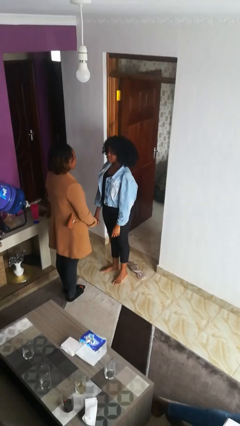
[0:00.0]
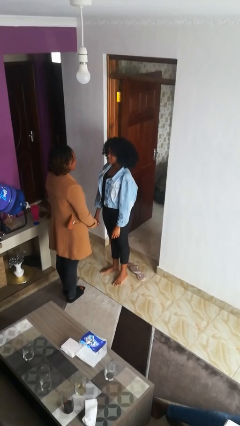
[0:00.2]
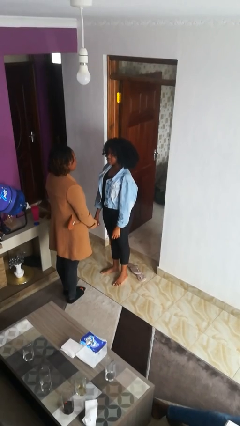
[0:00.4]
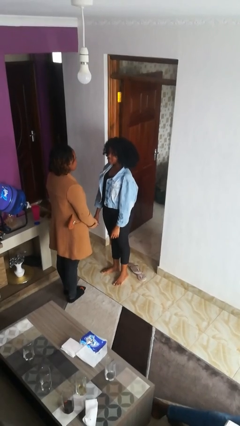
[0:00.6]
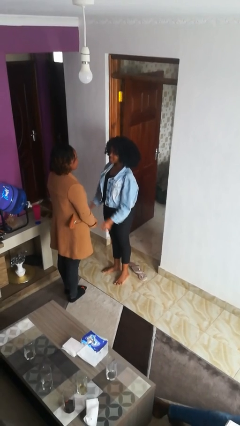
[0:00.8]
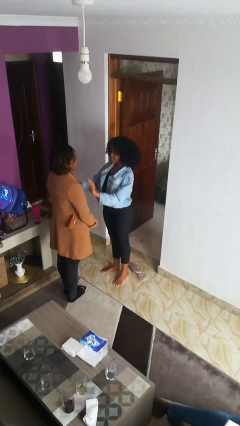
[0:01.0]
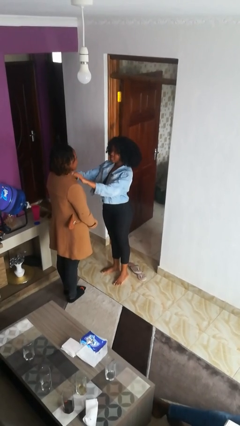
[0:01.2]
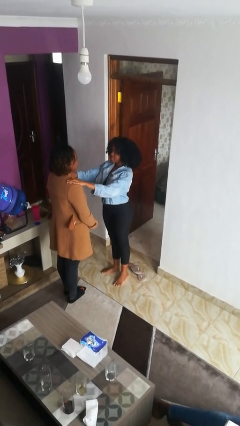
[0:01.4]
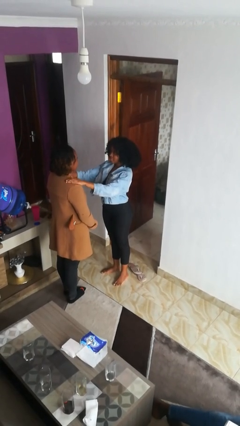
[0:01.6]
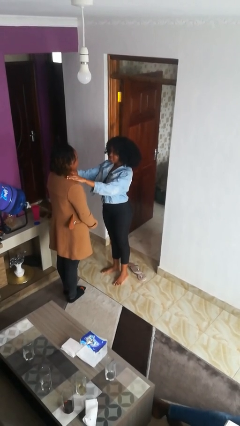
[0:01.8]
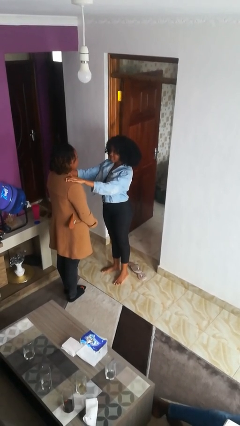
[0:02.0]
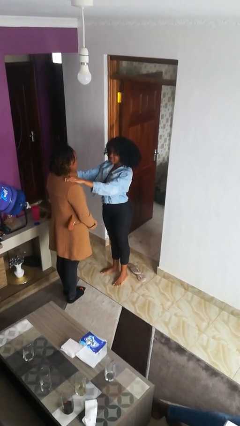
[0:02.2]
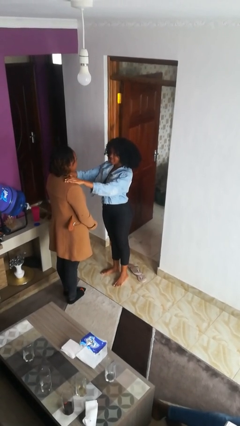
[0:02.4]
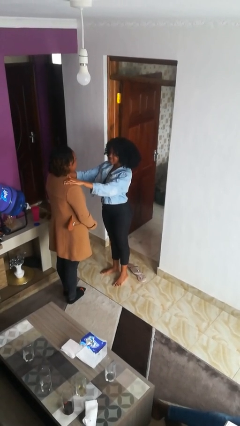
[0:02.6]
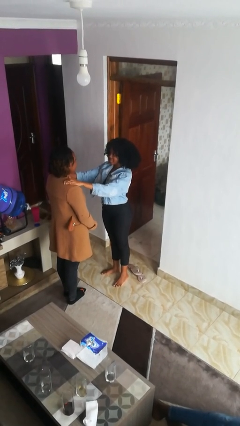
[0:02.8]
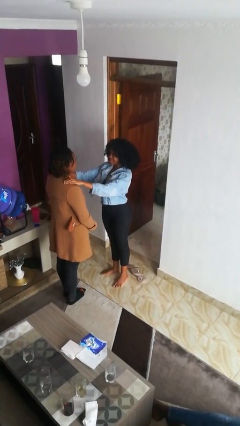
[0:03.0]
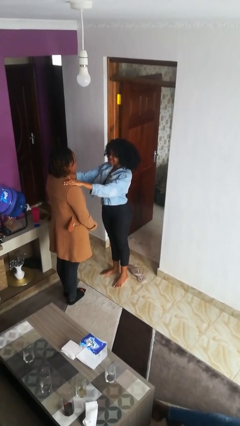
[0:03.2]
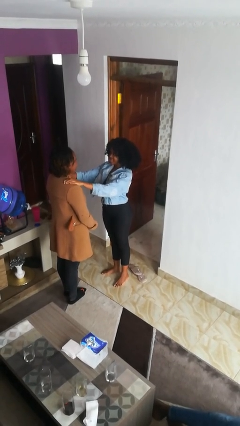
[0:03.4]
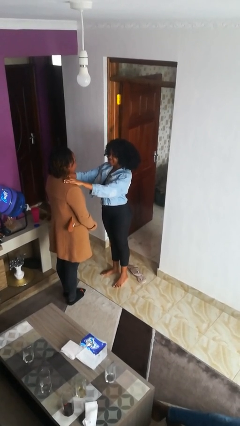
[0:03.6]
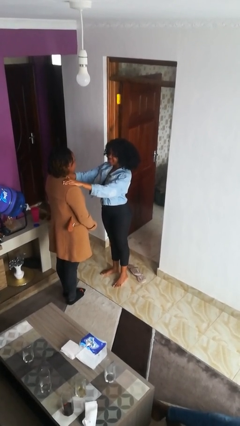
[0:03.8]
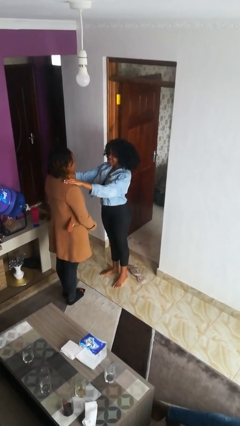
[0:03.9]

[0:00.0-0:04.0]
person pounds shoulders of person

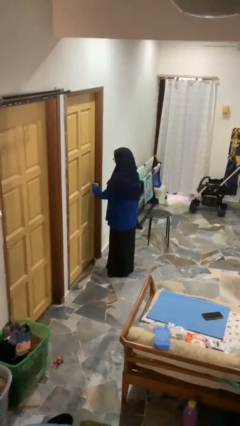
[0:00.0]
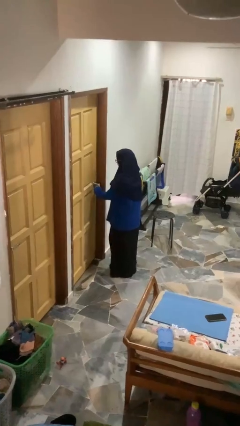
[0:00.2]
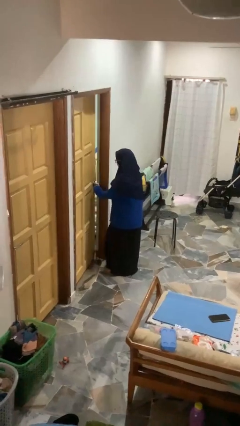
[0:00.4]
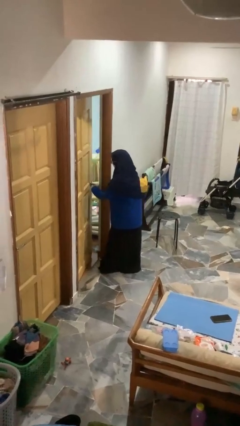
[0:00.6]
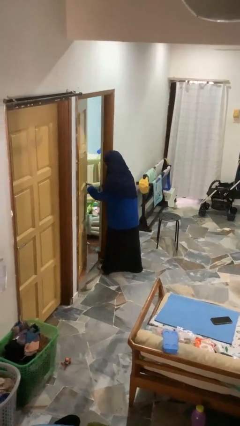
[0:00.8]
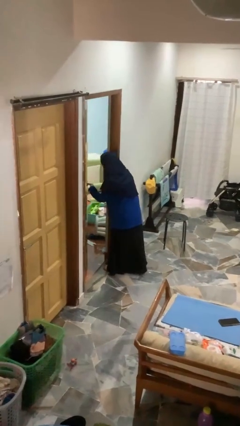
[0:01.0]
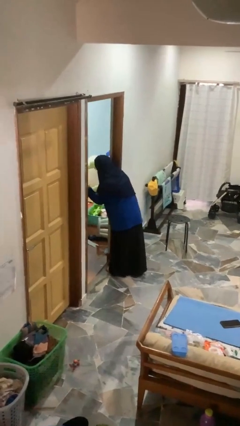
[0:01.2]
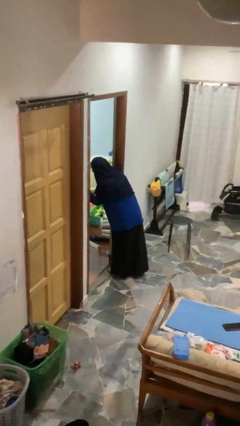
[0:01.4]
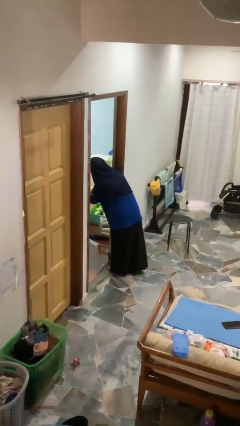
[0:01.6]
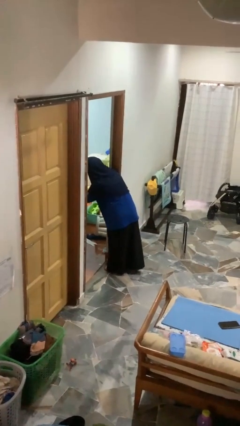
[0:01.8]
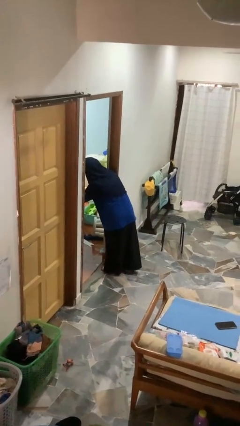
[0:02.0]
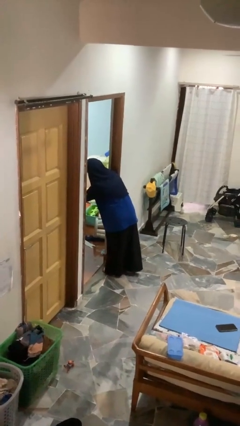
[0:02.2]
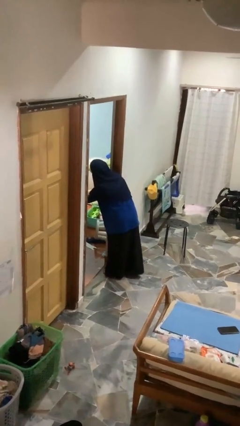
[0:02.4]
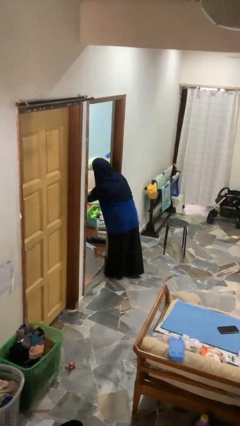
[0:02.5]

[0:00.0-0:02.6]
person opens facility door

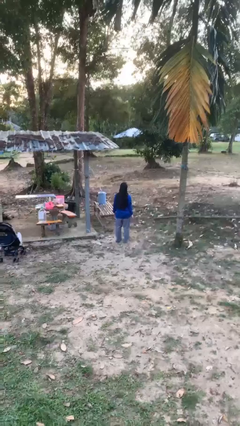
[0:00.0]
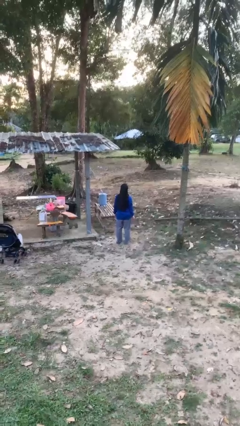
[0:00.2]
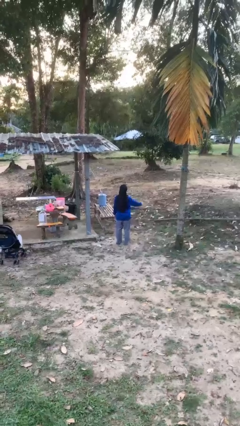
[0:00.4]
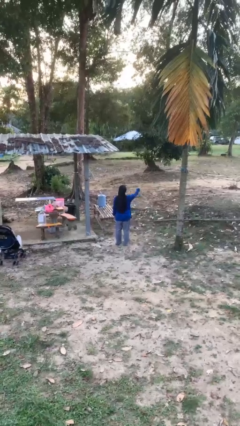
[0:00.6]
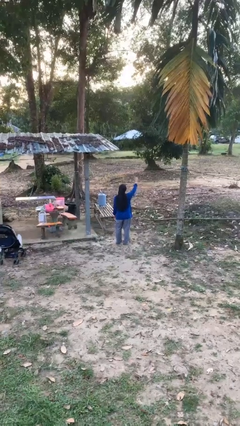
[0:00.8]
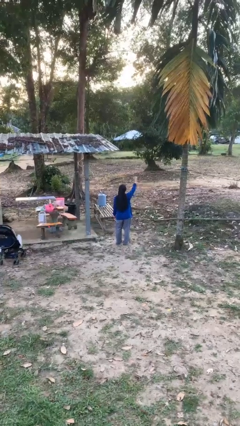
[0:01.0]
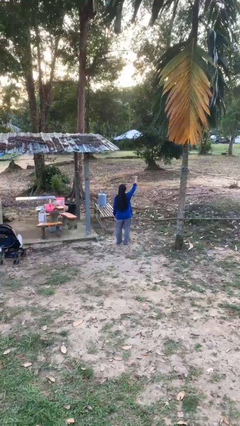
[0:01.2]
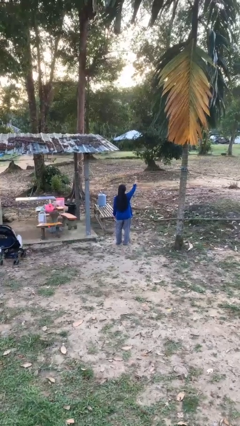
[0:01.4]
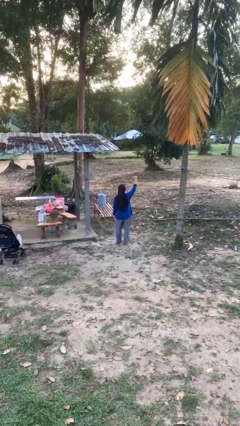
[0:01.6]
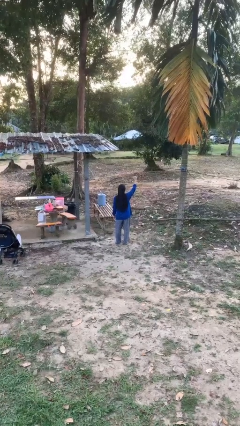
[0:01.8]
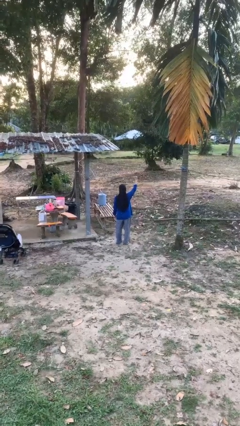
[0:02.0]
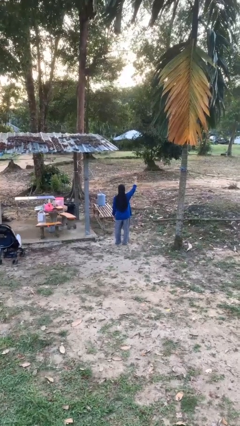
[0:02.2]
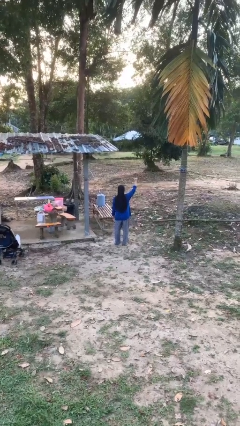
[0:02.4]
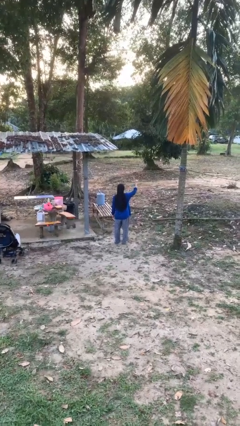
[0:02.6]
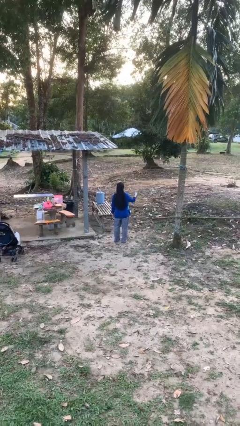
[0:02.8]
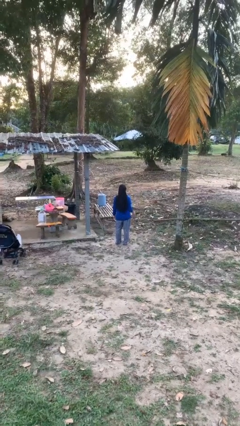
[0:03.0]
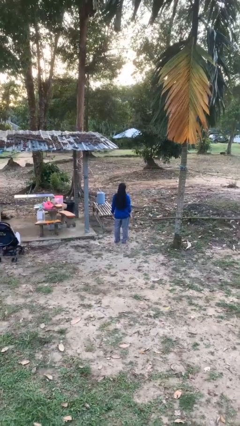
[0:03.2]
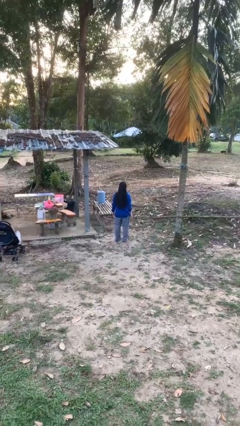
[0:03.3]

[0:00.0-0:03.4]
person gestures hang loose

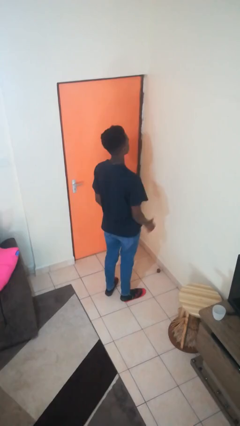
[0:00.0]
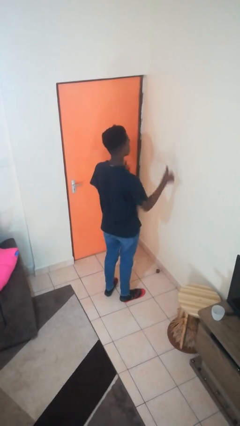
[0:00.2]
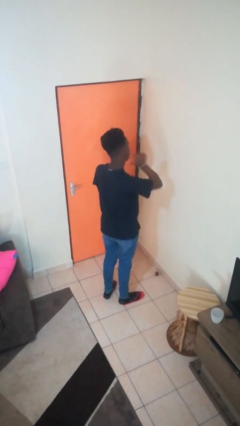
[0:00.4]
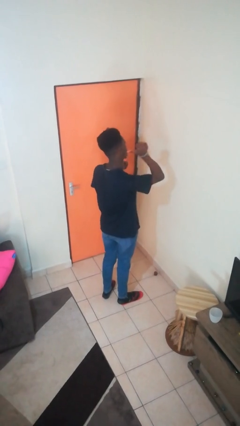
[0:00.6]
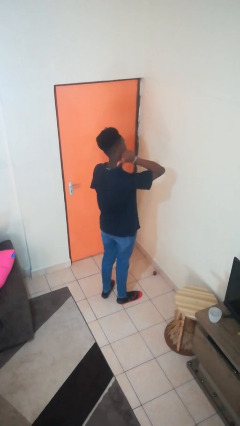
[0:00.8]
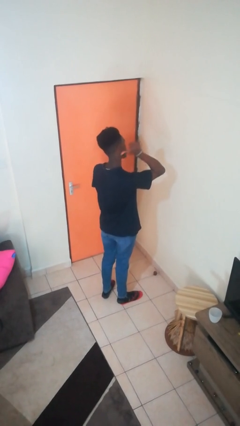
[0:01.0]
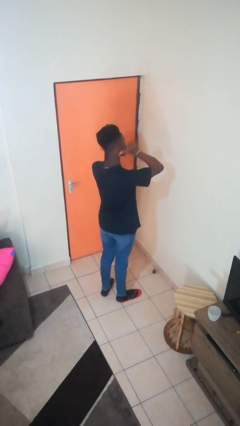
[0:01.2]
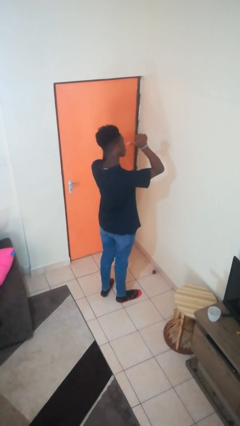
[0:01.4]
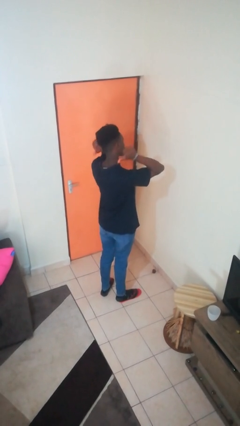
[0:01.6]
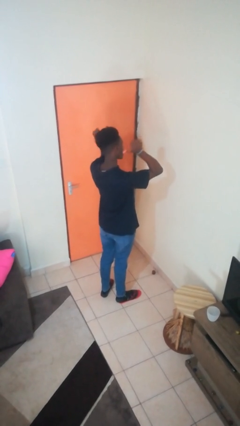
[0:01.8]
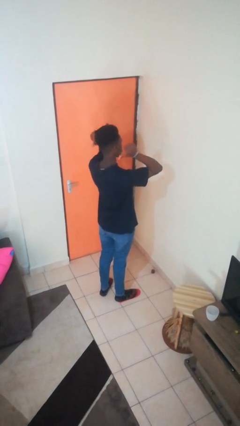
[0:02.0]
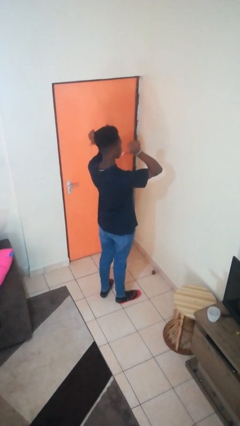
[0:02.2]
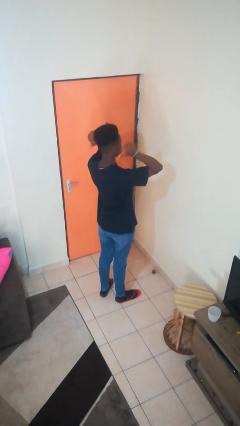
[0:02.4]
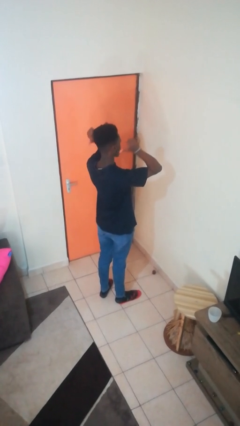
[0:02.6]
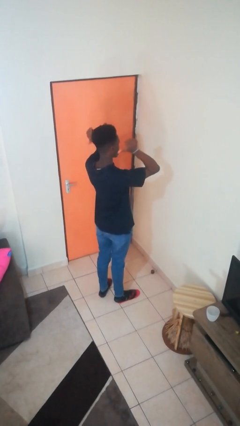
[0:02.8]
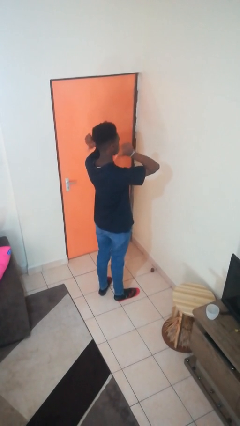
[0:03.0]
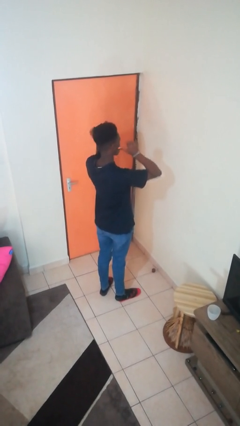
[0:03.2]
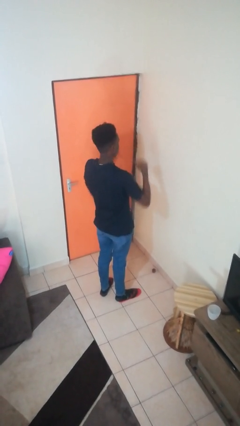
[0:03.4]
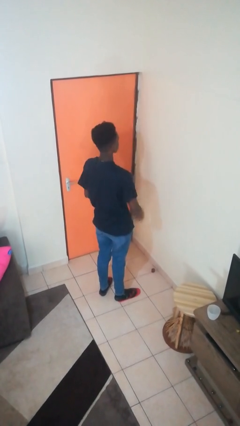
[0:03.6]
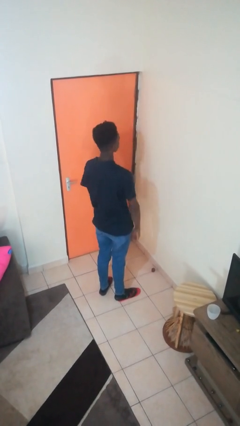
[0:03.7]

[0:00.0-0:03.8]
person gestures behind me

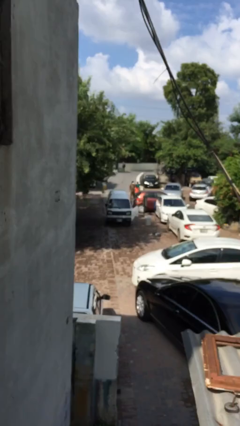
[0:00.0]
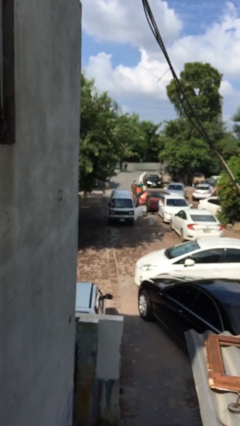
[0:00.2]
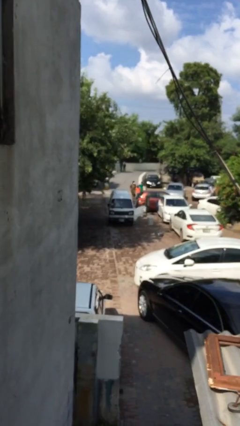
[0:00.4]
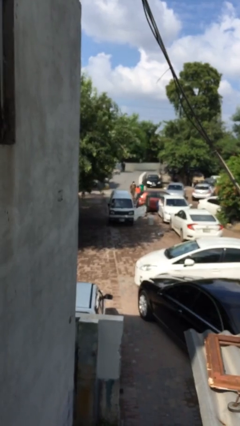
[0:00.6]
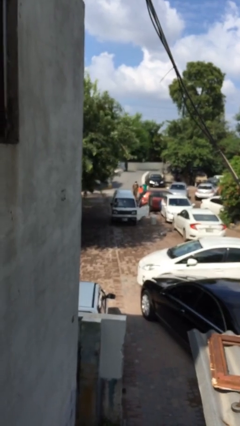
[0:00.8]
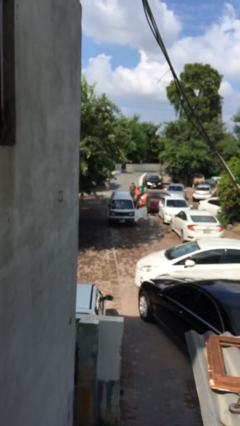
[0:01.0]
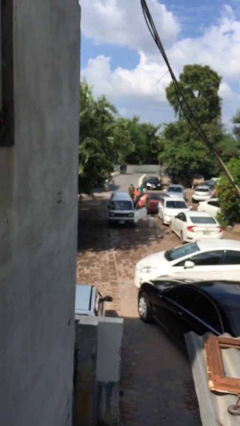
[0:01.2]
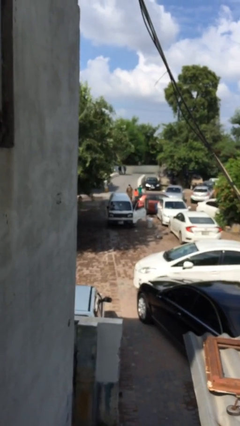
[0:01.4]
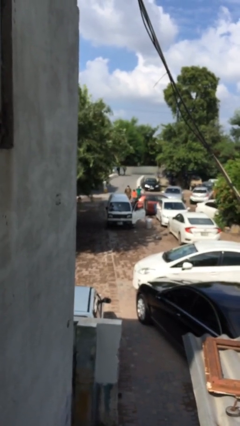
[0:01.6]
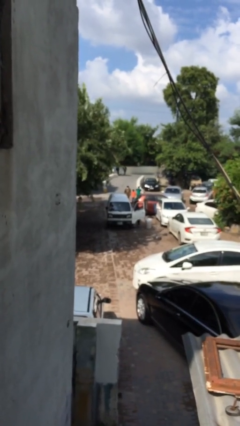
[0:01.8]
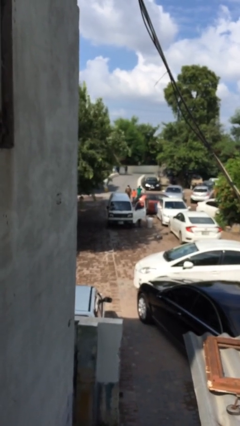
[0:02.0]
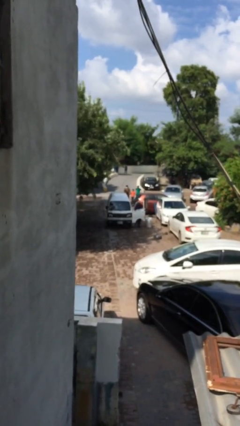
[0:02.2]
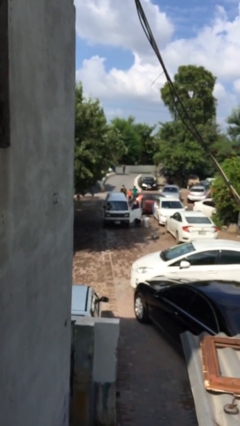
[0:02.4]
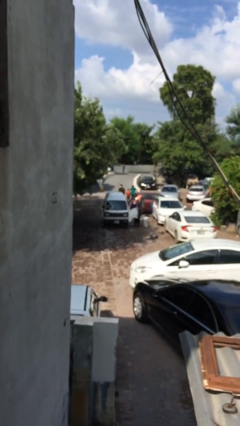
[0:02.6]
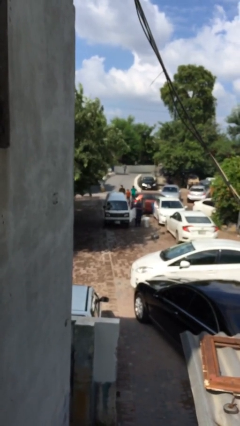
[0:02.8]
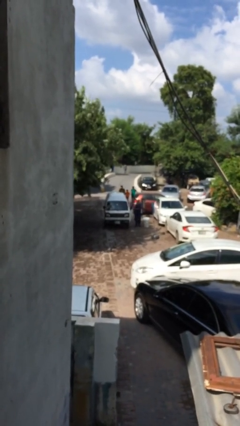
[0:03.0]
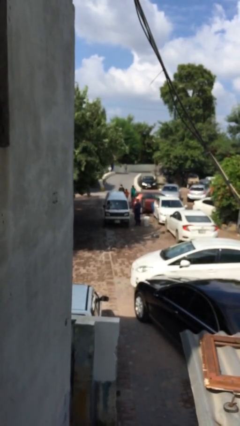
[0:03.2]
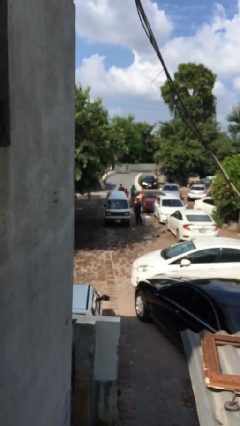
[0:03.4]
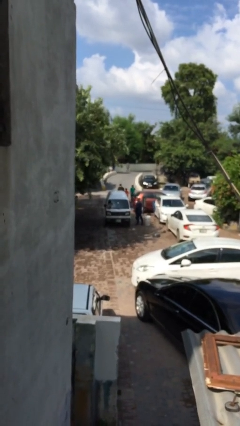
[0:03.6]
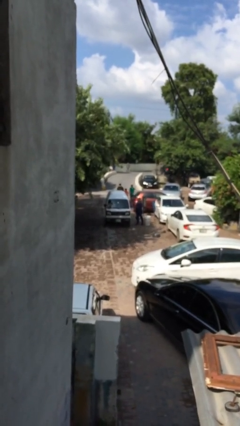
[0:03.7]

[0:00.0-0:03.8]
car drops off person
